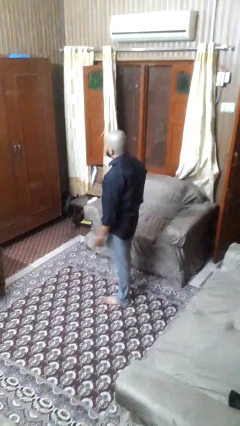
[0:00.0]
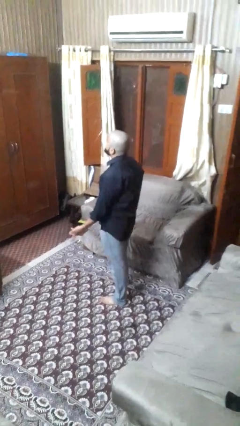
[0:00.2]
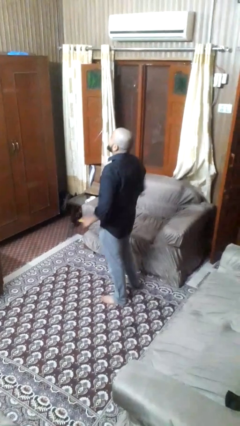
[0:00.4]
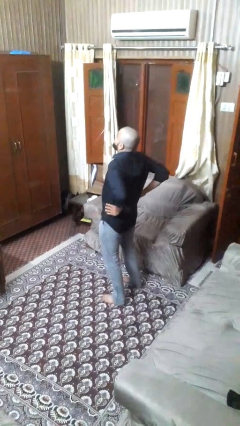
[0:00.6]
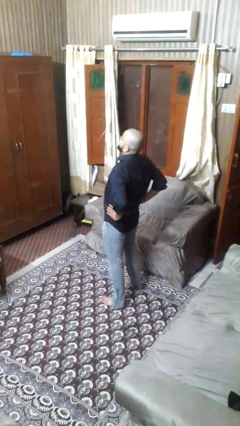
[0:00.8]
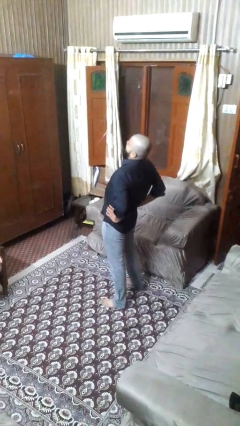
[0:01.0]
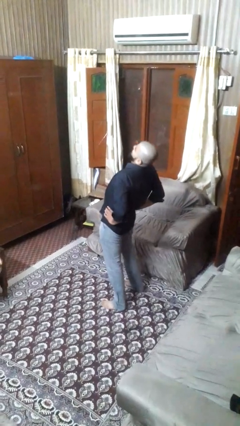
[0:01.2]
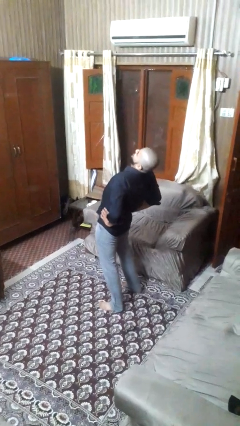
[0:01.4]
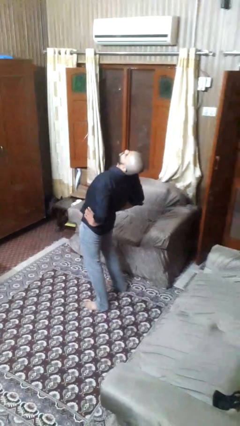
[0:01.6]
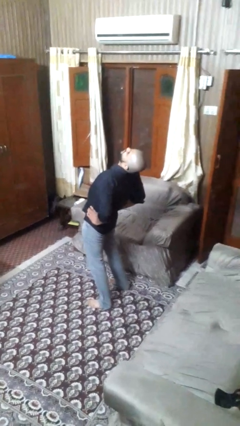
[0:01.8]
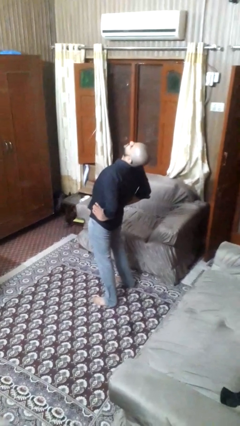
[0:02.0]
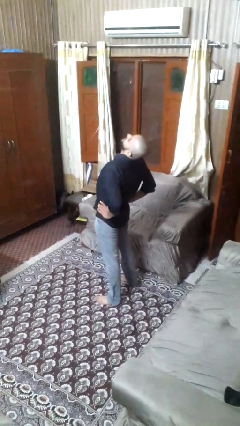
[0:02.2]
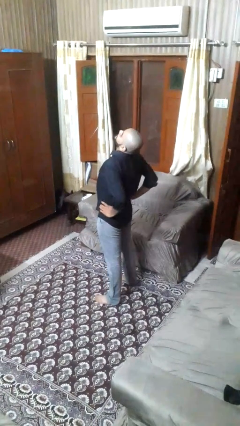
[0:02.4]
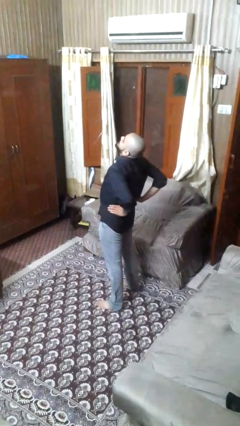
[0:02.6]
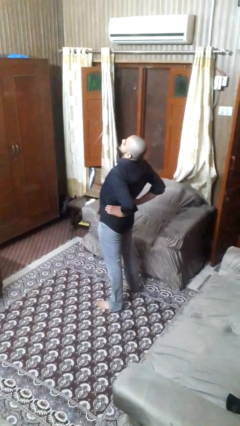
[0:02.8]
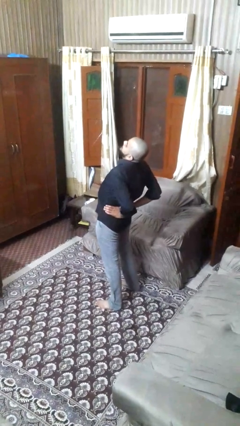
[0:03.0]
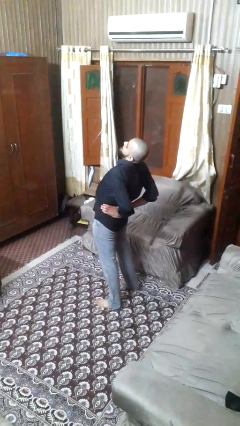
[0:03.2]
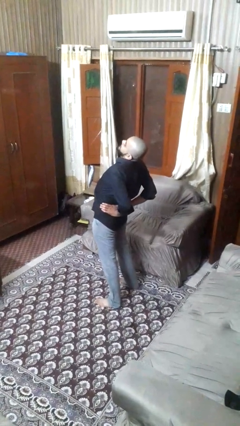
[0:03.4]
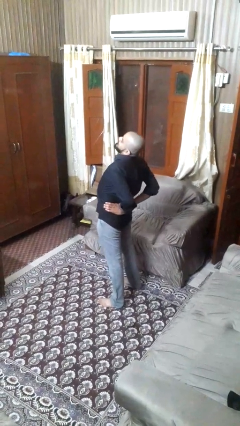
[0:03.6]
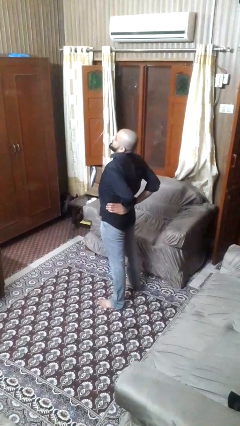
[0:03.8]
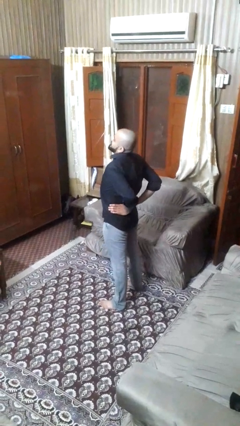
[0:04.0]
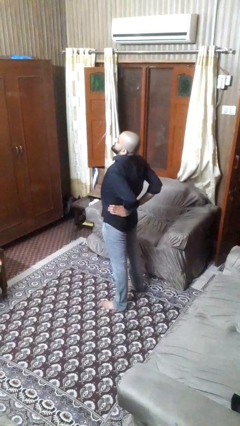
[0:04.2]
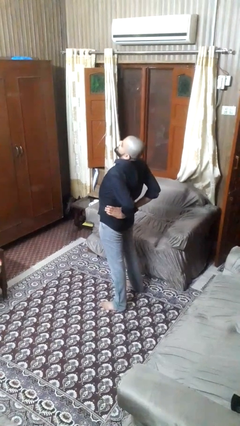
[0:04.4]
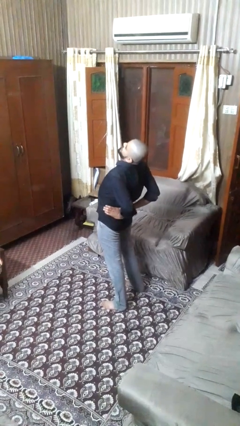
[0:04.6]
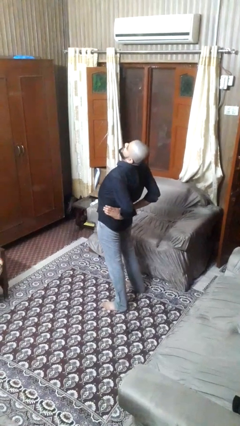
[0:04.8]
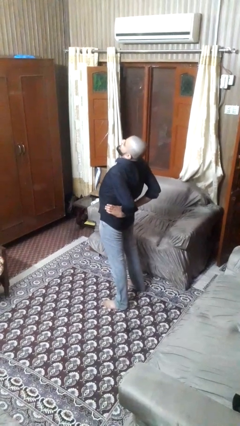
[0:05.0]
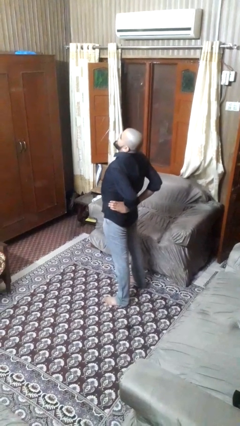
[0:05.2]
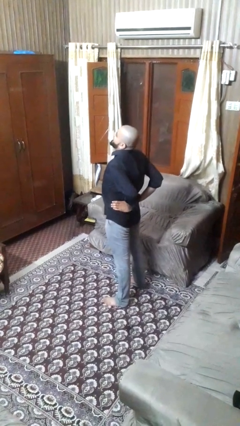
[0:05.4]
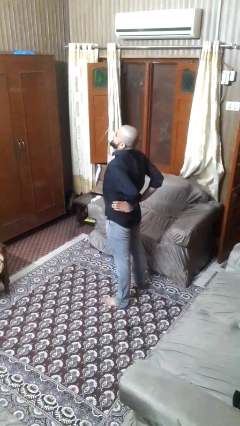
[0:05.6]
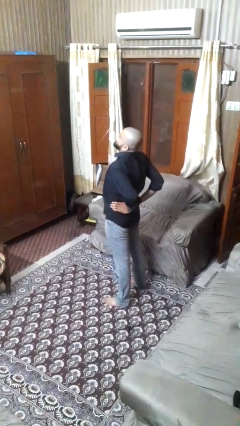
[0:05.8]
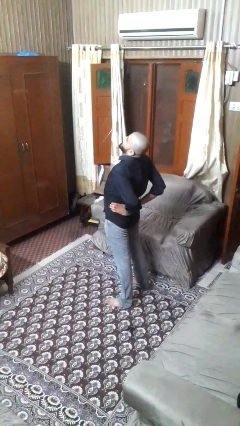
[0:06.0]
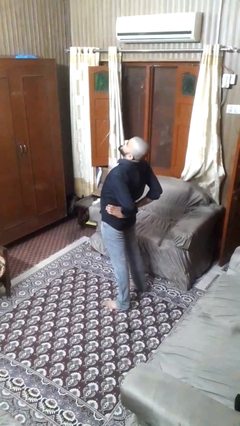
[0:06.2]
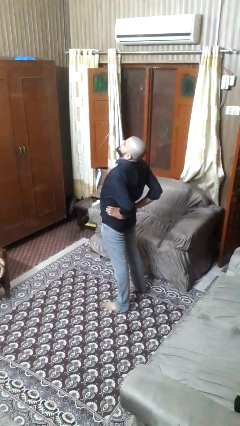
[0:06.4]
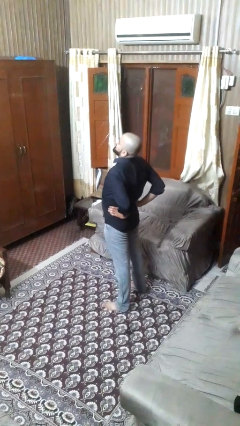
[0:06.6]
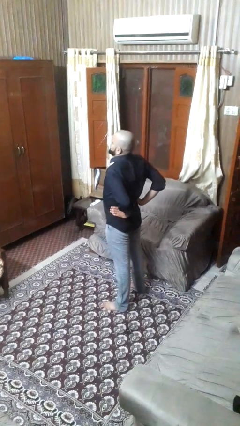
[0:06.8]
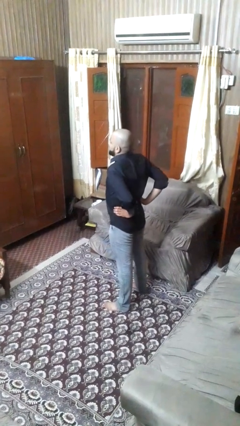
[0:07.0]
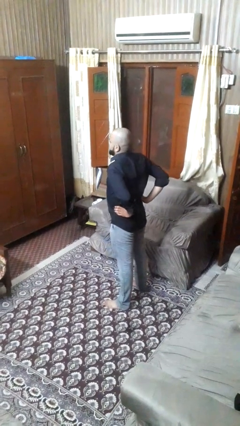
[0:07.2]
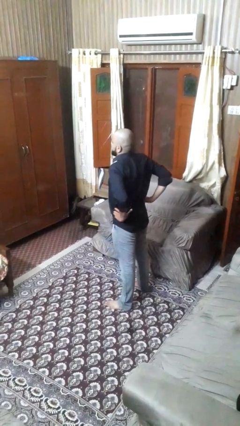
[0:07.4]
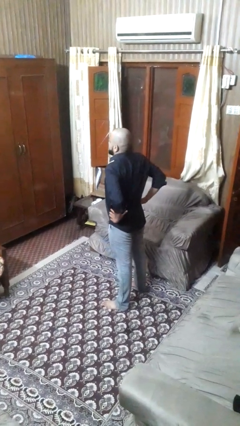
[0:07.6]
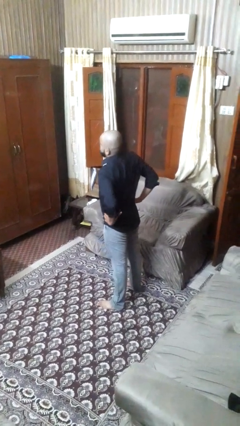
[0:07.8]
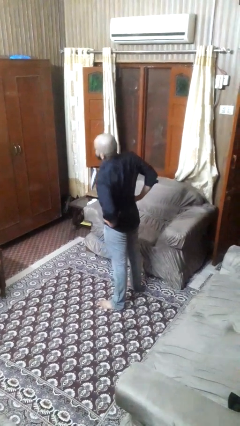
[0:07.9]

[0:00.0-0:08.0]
person stretches back

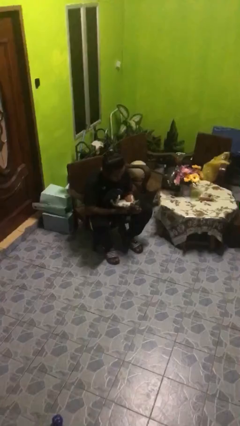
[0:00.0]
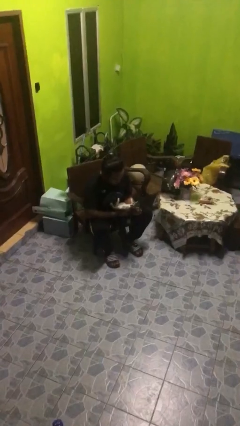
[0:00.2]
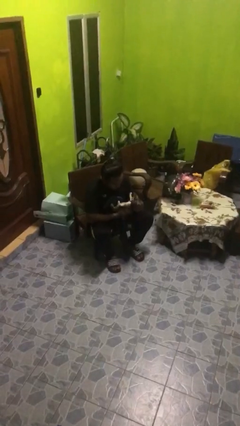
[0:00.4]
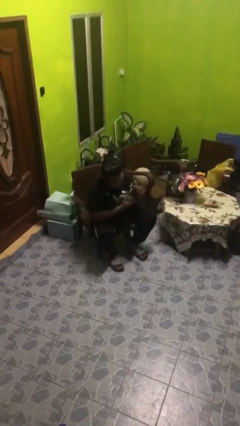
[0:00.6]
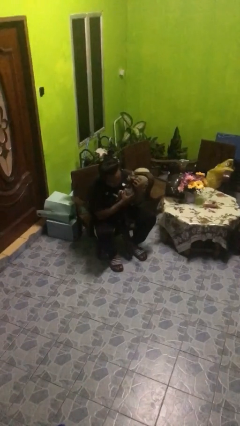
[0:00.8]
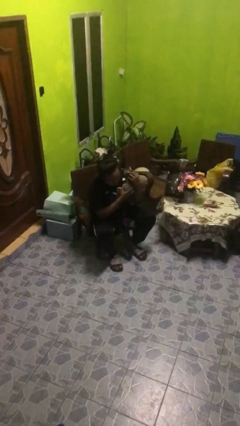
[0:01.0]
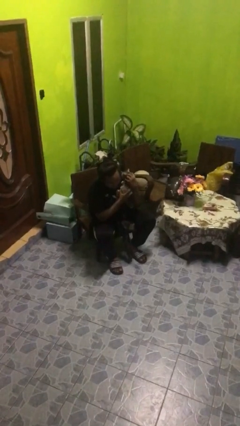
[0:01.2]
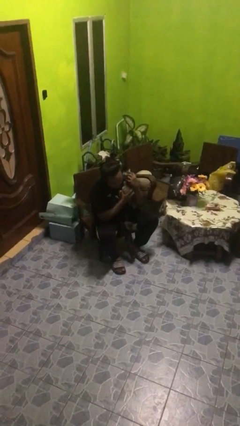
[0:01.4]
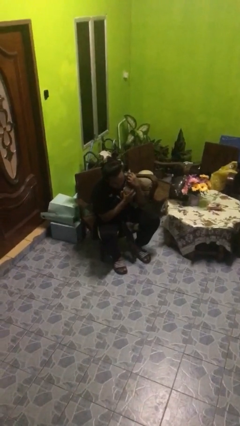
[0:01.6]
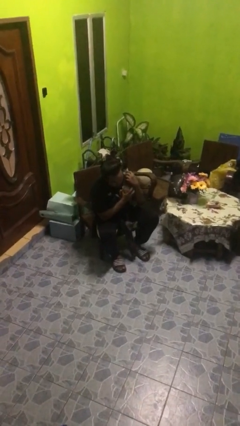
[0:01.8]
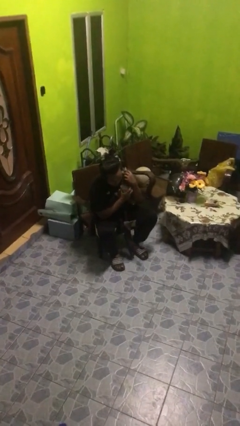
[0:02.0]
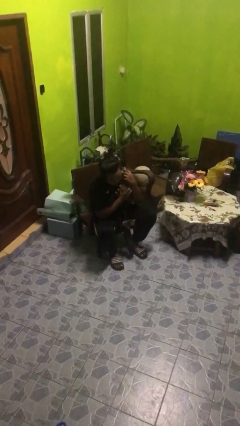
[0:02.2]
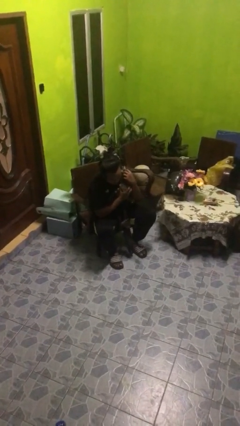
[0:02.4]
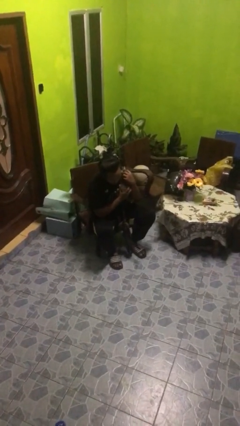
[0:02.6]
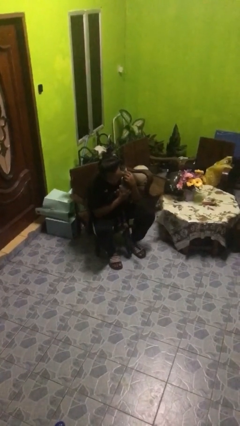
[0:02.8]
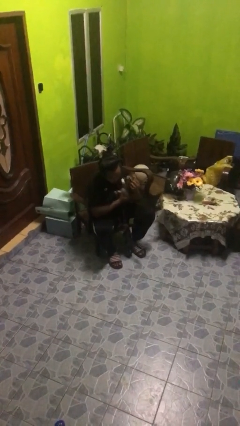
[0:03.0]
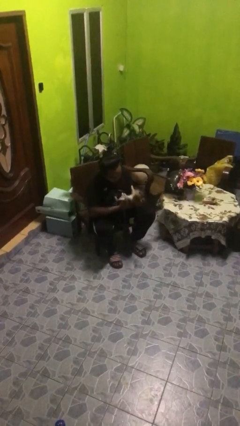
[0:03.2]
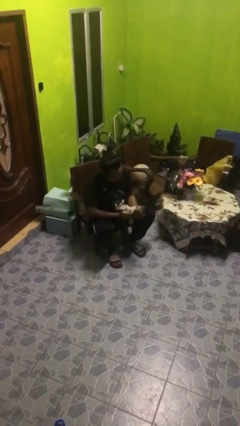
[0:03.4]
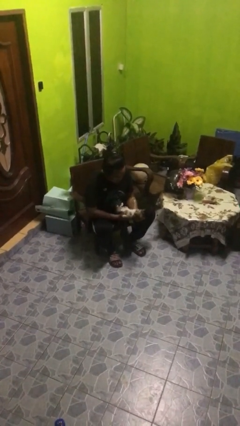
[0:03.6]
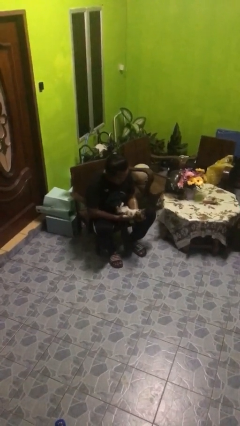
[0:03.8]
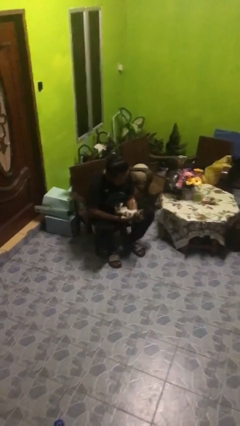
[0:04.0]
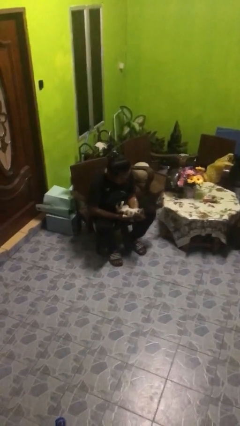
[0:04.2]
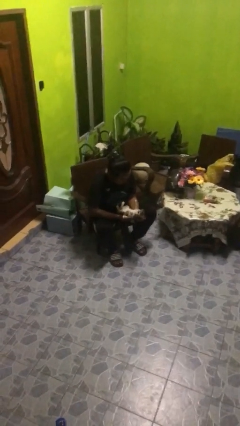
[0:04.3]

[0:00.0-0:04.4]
person hugs cat

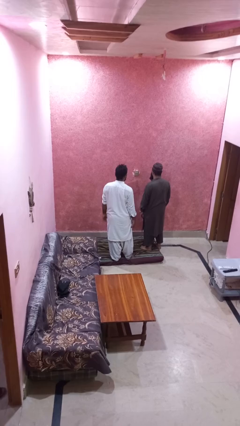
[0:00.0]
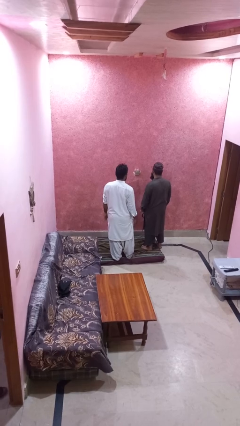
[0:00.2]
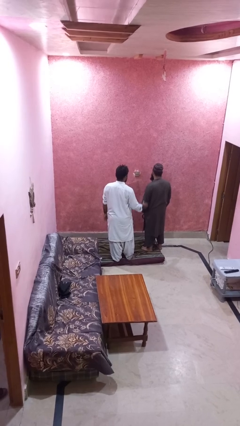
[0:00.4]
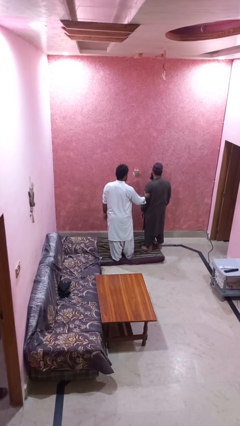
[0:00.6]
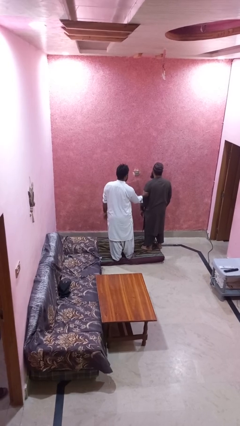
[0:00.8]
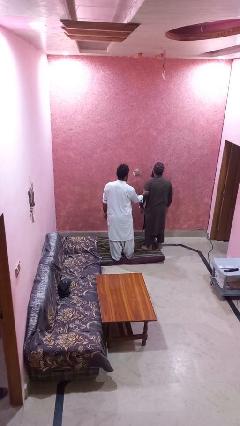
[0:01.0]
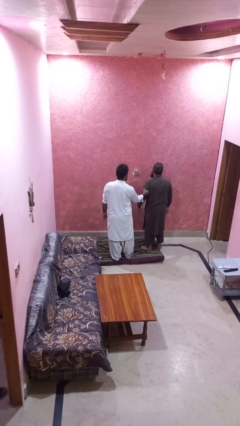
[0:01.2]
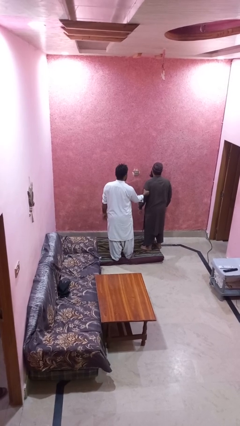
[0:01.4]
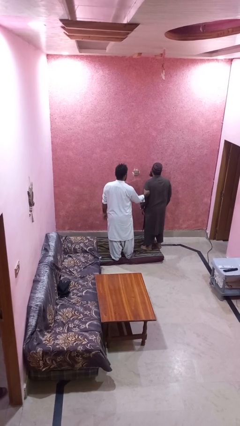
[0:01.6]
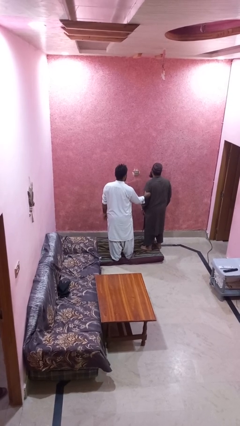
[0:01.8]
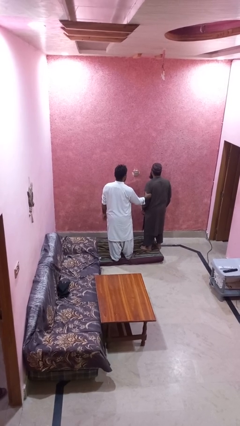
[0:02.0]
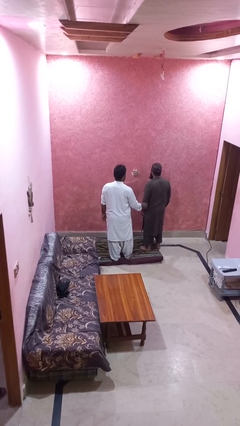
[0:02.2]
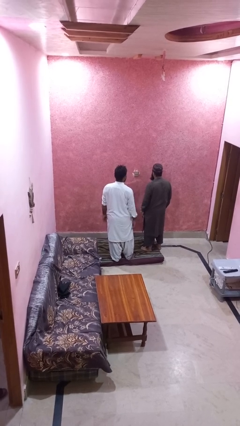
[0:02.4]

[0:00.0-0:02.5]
person grabs person by bicep

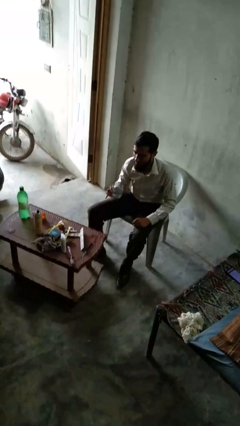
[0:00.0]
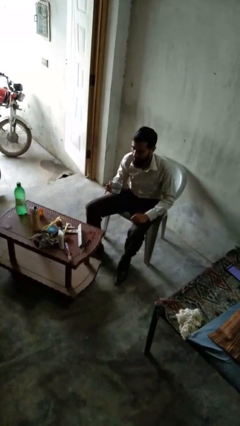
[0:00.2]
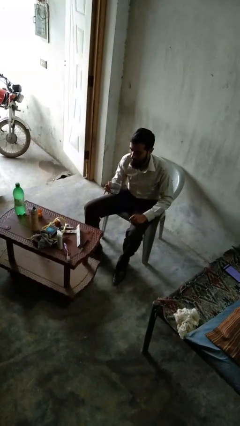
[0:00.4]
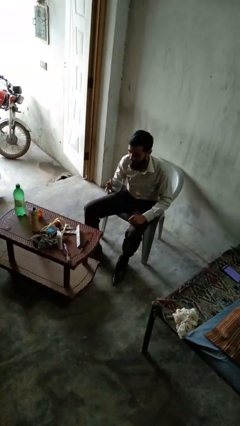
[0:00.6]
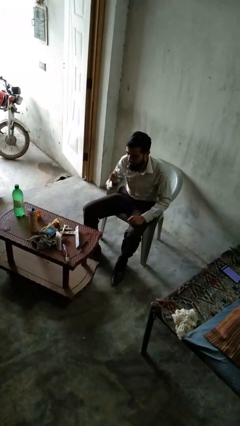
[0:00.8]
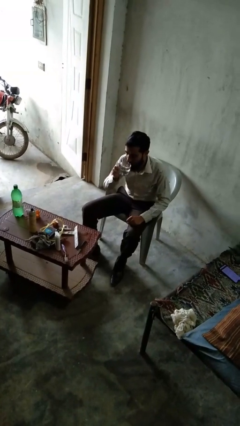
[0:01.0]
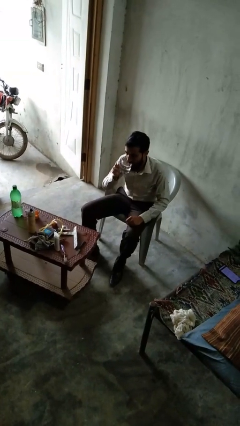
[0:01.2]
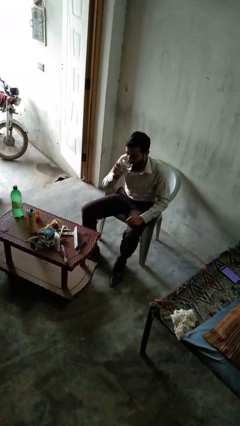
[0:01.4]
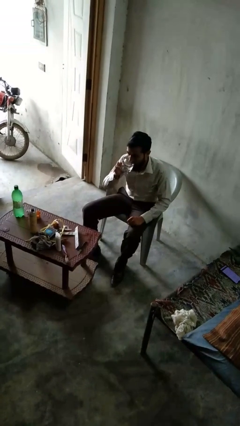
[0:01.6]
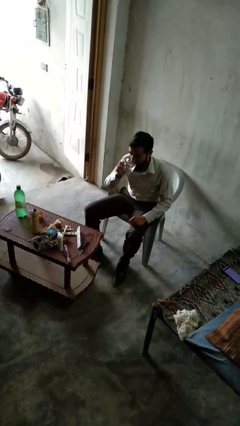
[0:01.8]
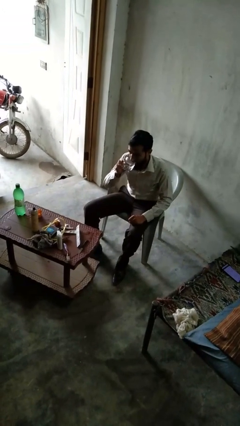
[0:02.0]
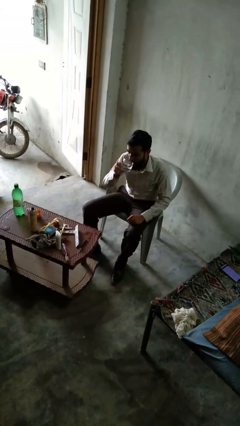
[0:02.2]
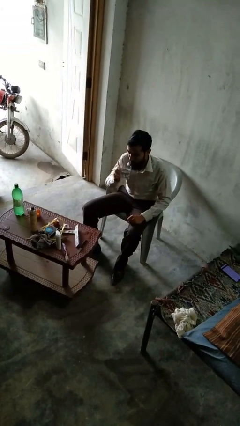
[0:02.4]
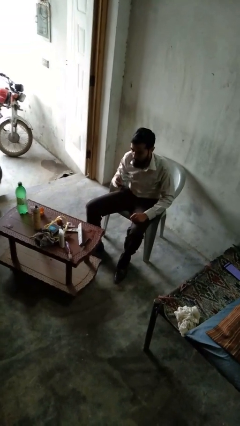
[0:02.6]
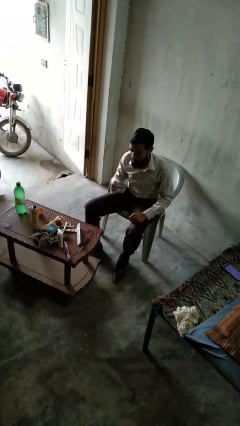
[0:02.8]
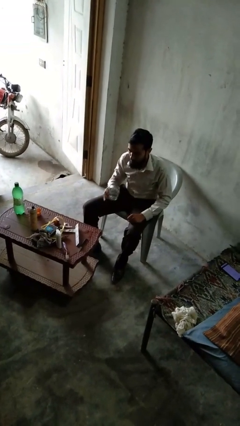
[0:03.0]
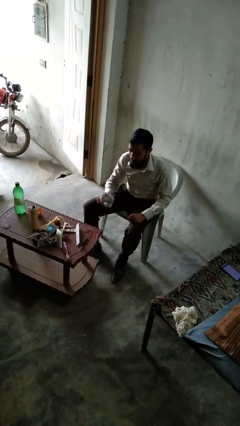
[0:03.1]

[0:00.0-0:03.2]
person drinks from shotglass
